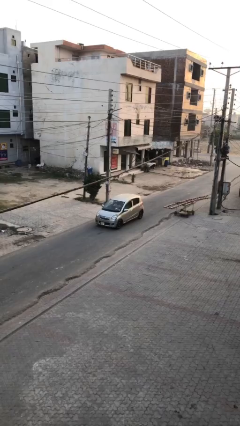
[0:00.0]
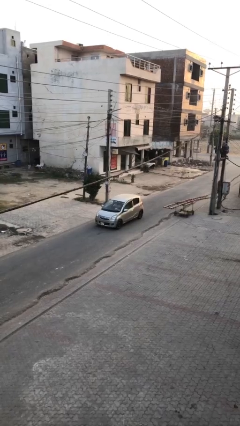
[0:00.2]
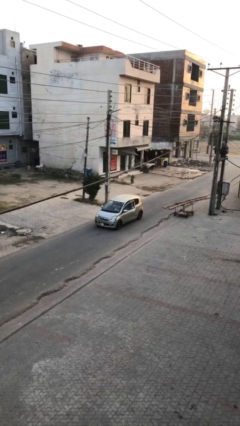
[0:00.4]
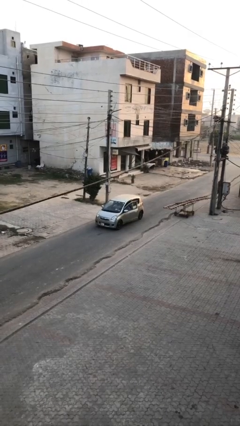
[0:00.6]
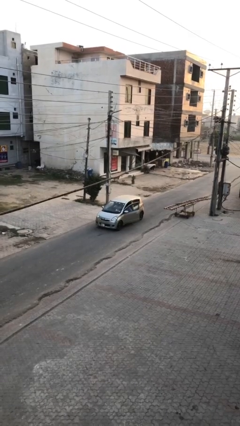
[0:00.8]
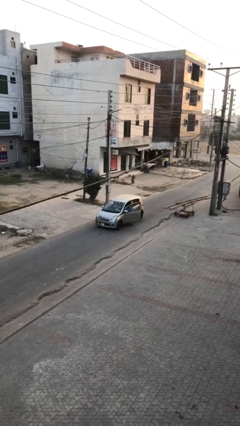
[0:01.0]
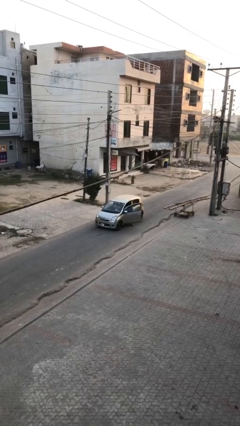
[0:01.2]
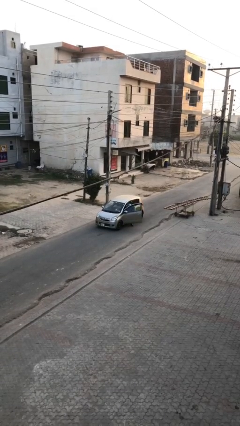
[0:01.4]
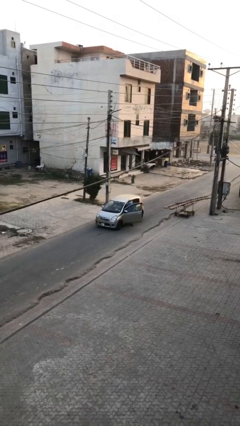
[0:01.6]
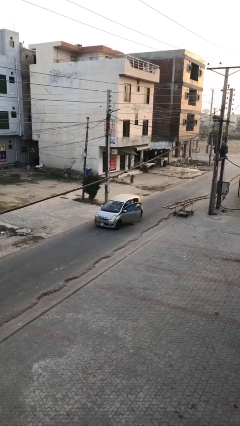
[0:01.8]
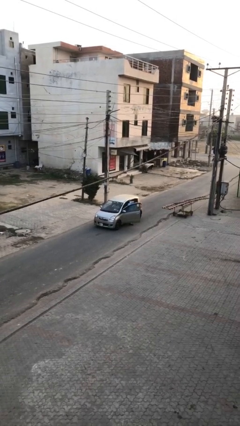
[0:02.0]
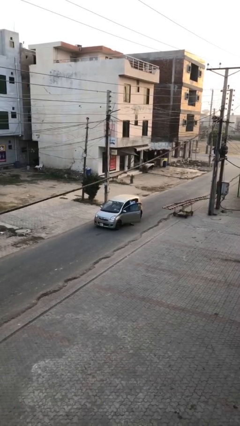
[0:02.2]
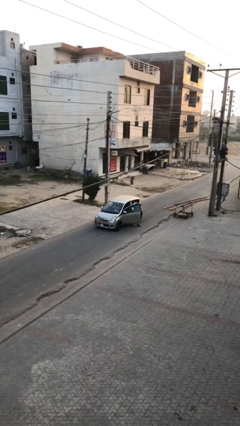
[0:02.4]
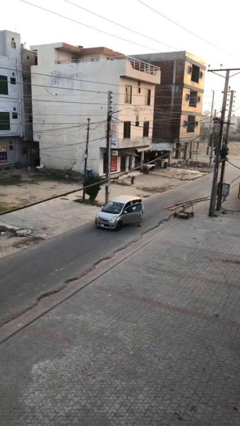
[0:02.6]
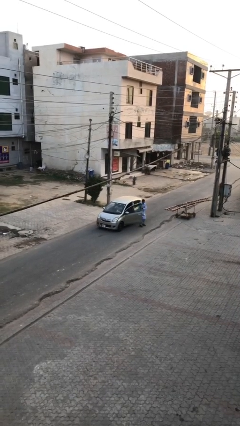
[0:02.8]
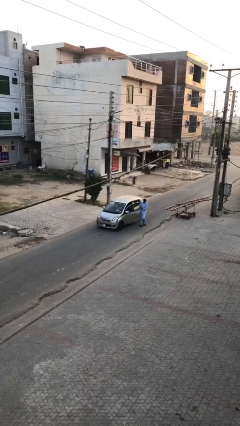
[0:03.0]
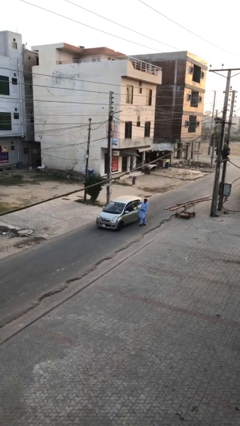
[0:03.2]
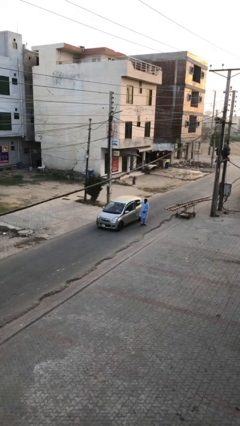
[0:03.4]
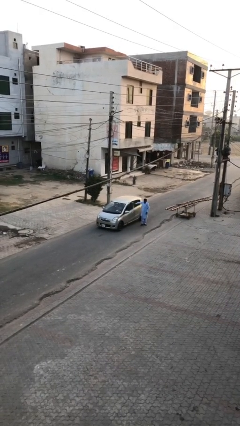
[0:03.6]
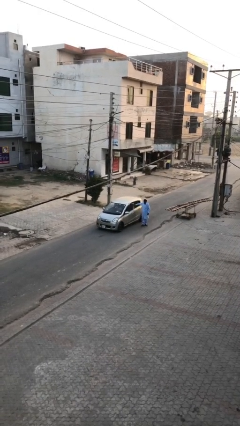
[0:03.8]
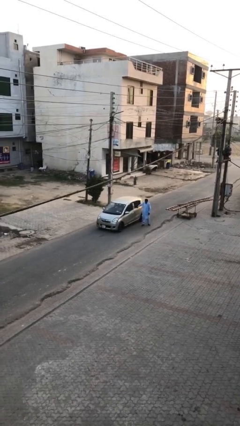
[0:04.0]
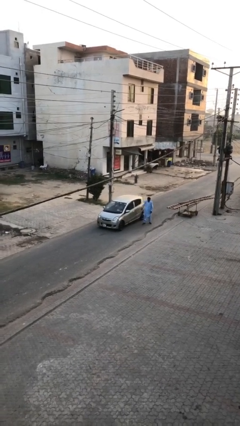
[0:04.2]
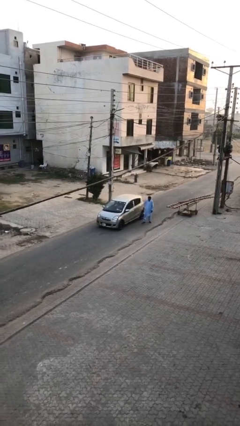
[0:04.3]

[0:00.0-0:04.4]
car drops off person

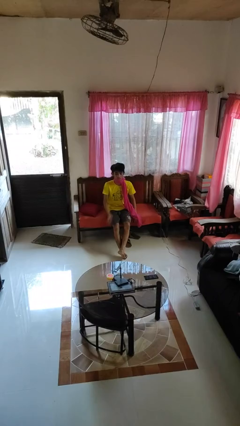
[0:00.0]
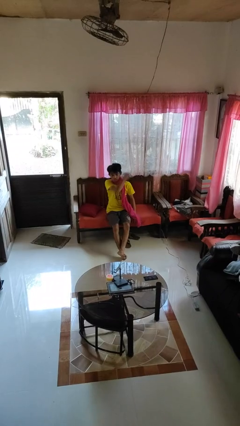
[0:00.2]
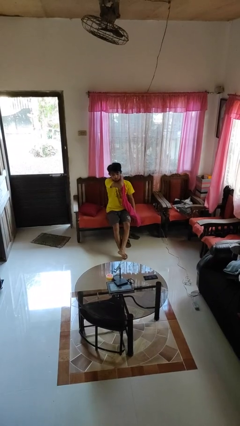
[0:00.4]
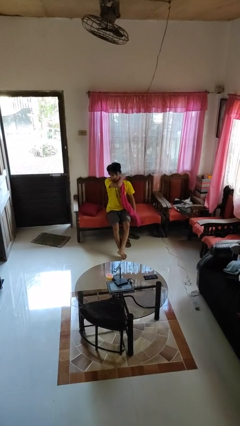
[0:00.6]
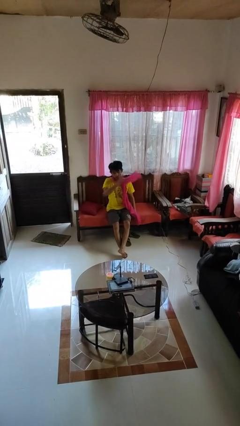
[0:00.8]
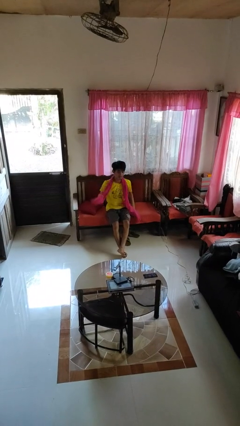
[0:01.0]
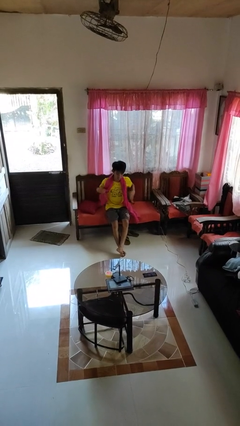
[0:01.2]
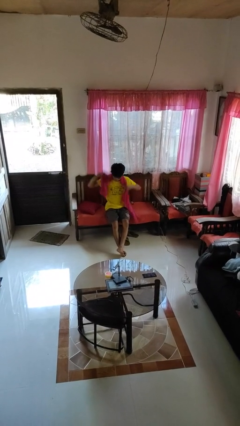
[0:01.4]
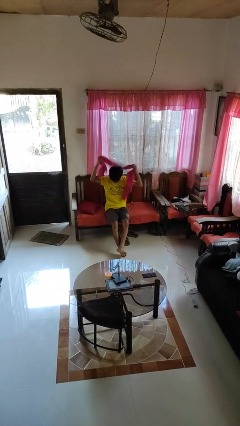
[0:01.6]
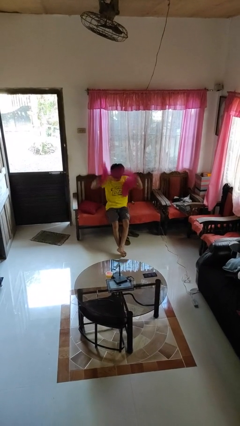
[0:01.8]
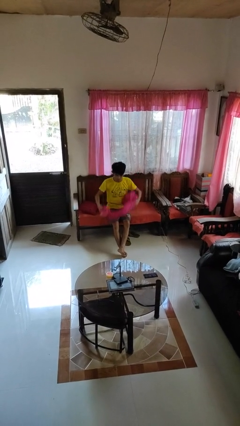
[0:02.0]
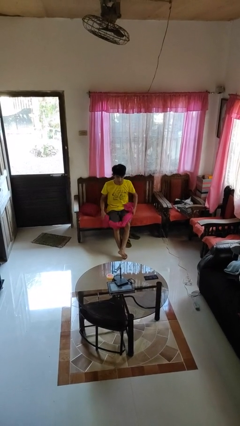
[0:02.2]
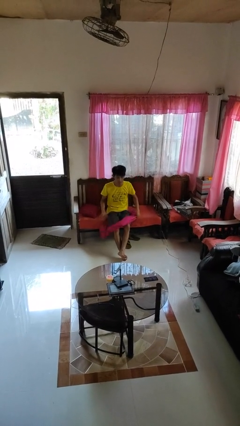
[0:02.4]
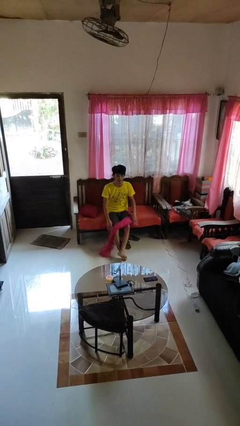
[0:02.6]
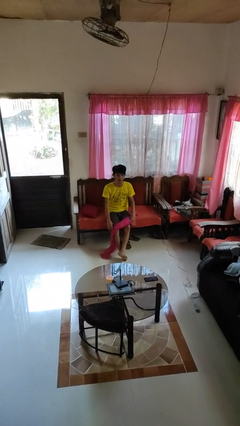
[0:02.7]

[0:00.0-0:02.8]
person takes off scarf

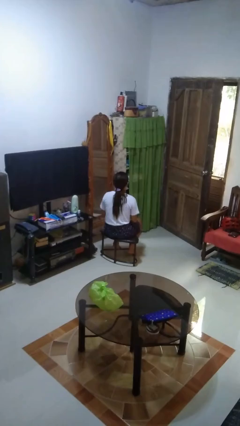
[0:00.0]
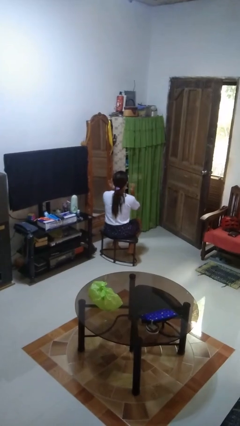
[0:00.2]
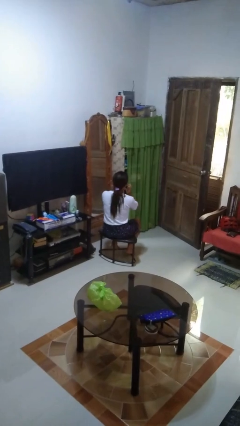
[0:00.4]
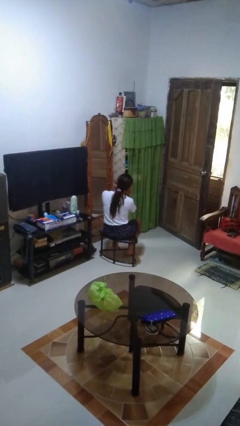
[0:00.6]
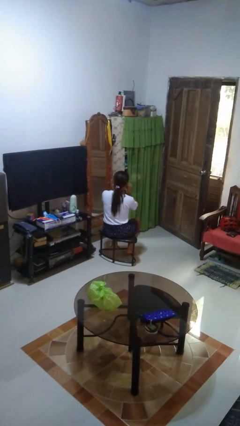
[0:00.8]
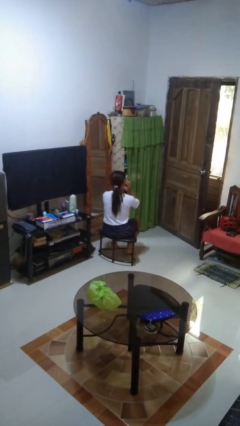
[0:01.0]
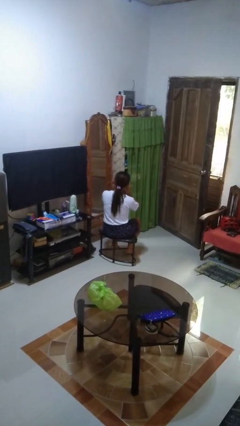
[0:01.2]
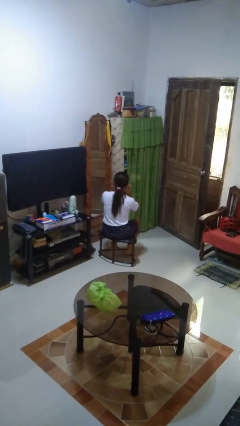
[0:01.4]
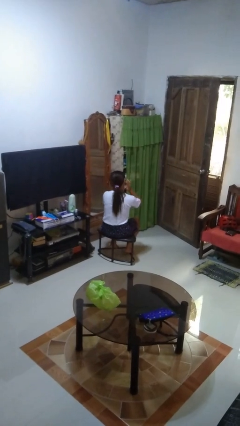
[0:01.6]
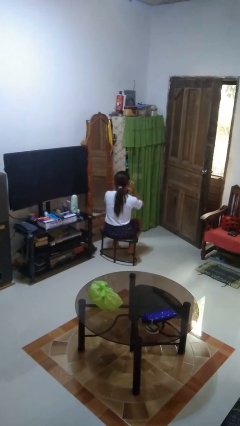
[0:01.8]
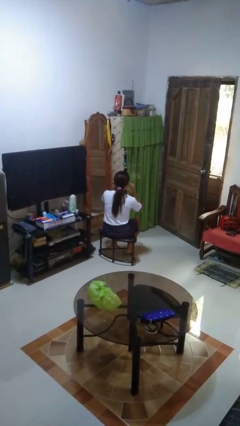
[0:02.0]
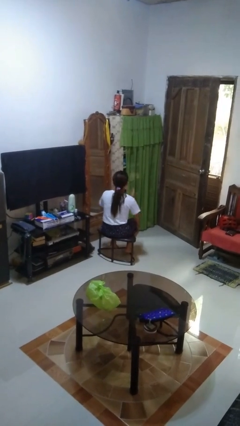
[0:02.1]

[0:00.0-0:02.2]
person puts fingers in ear

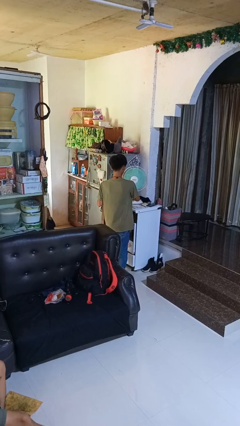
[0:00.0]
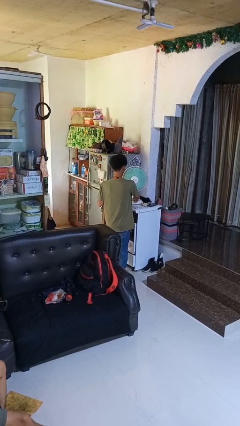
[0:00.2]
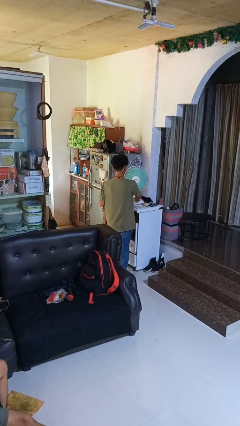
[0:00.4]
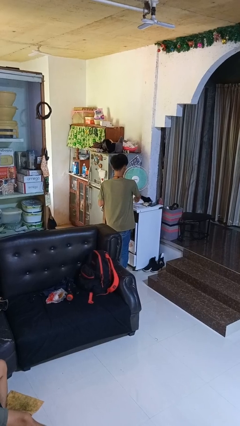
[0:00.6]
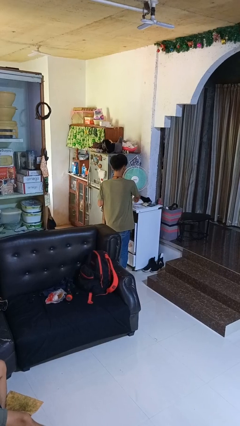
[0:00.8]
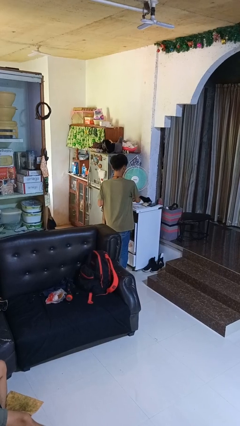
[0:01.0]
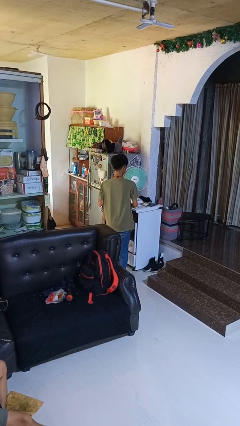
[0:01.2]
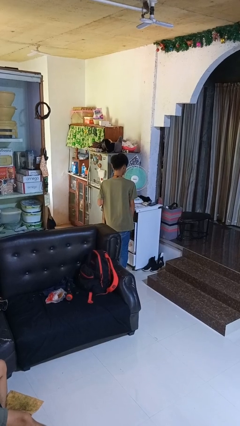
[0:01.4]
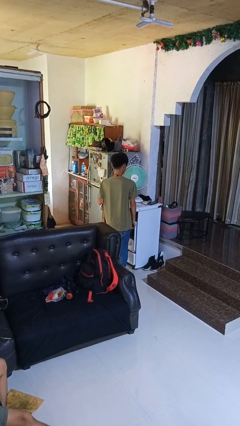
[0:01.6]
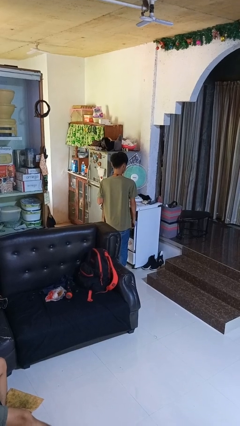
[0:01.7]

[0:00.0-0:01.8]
person turns off fan

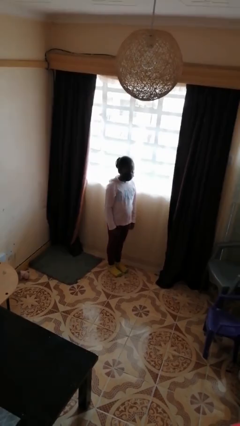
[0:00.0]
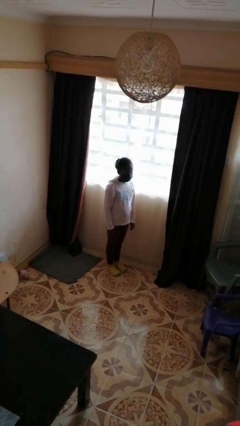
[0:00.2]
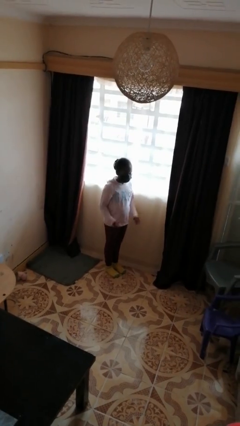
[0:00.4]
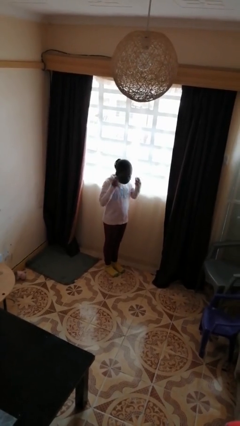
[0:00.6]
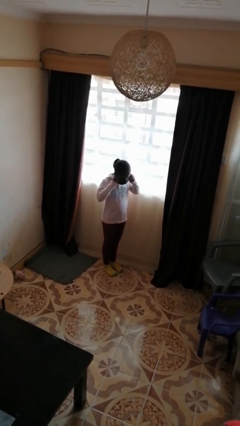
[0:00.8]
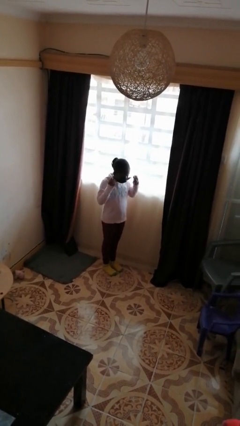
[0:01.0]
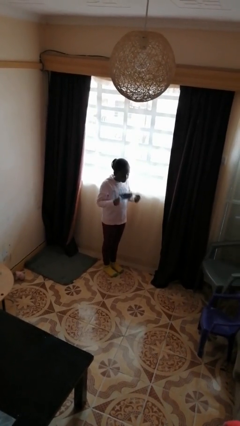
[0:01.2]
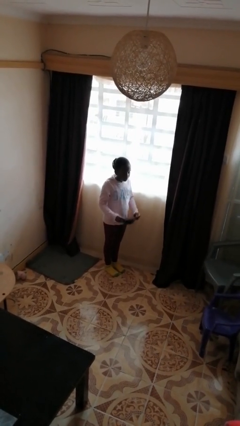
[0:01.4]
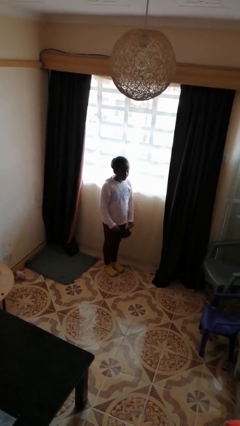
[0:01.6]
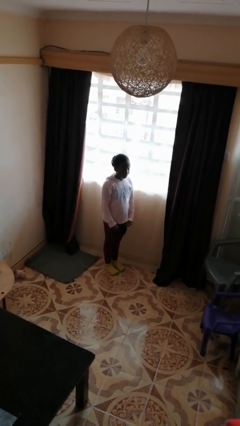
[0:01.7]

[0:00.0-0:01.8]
person takes off facemask

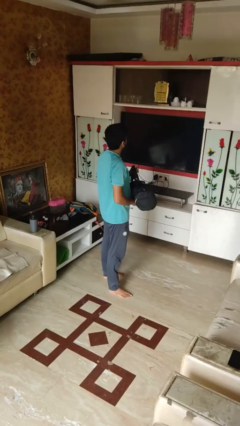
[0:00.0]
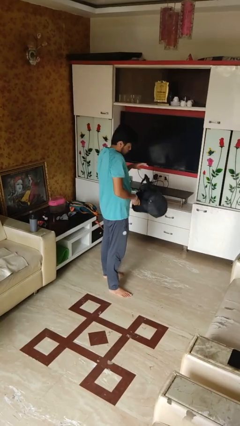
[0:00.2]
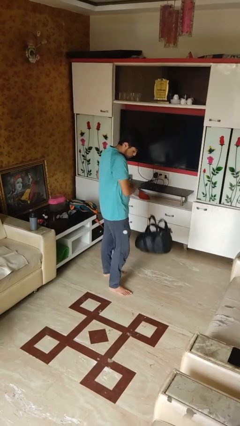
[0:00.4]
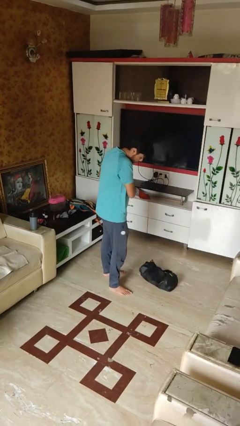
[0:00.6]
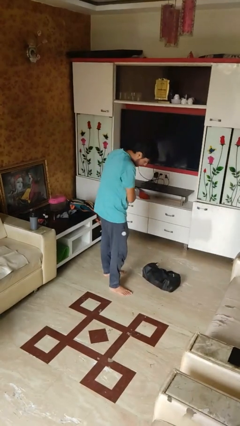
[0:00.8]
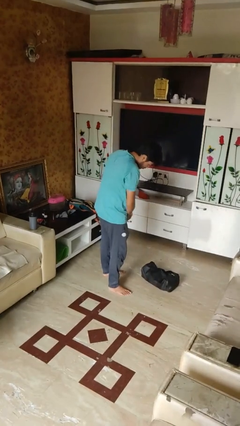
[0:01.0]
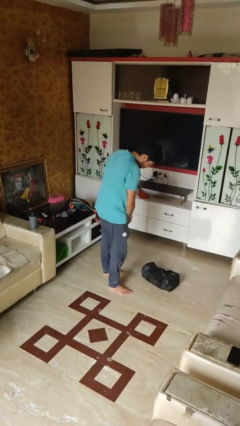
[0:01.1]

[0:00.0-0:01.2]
person drops object

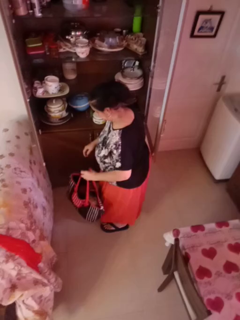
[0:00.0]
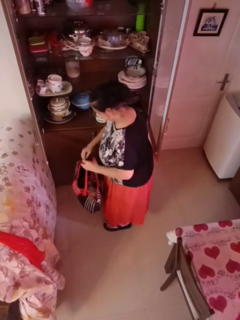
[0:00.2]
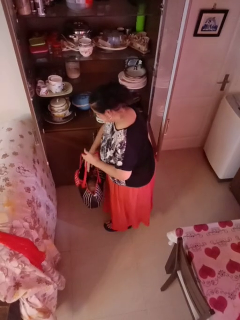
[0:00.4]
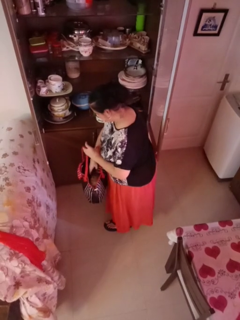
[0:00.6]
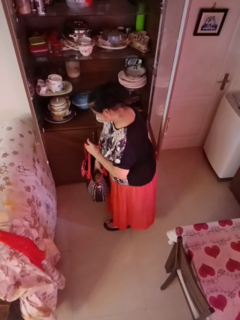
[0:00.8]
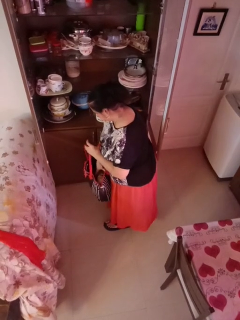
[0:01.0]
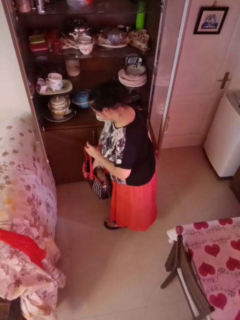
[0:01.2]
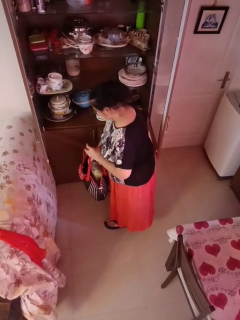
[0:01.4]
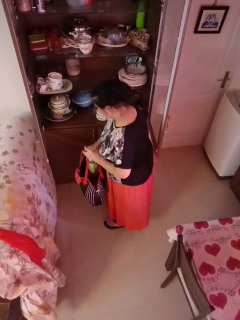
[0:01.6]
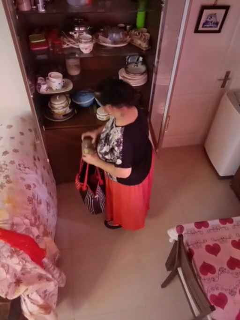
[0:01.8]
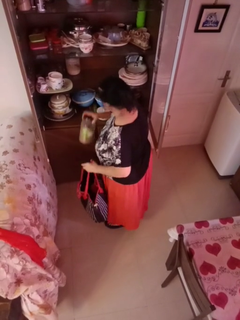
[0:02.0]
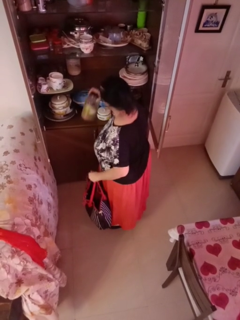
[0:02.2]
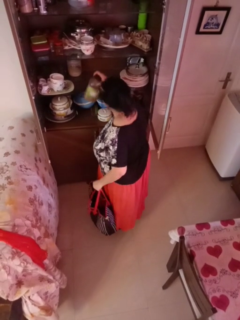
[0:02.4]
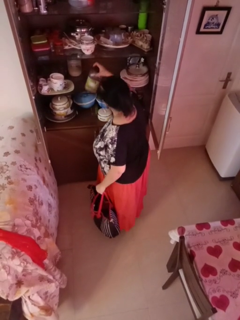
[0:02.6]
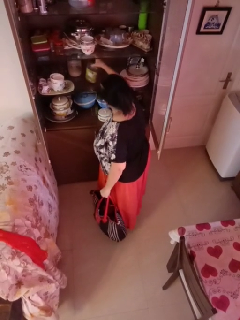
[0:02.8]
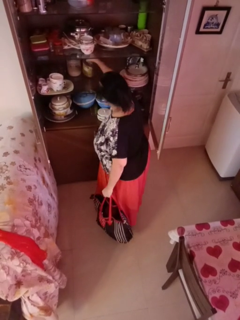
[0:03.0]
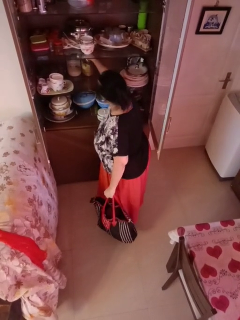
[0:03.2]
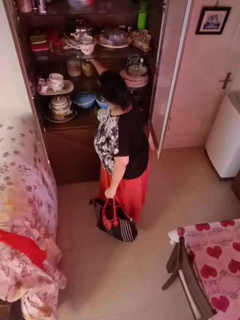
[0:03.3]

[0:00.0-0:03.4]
person loads groceries into cabinet

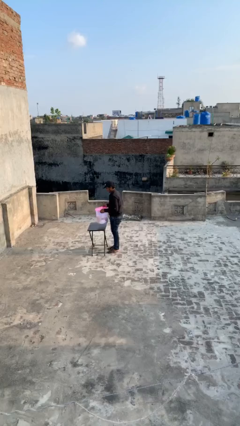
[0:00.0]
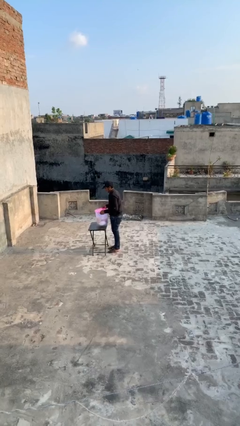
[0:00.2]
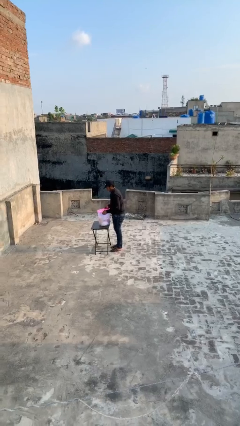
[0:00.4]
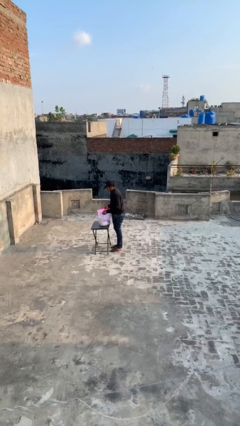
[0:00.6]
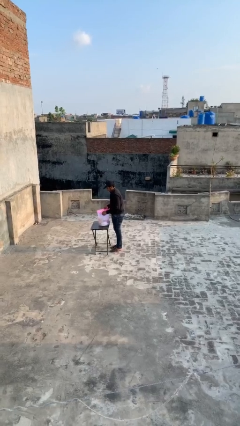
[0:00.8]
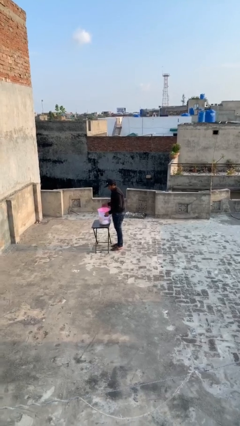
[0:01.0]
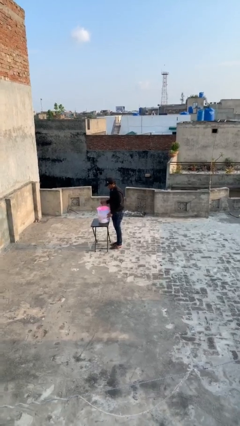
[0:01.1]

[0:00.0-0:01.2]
person puts down object on table
